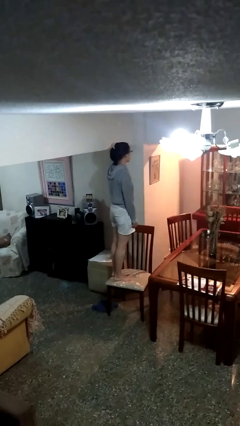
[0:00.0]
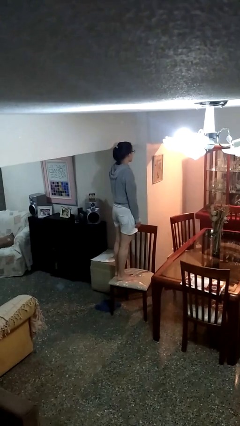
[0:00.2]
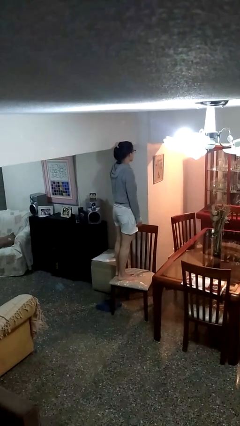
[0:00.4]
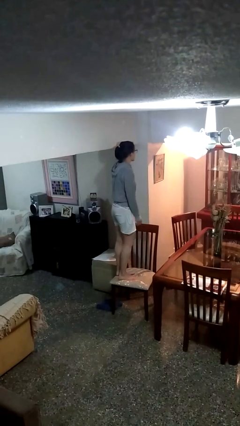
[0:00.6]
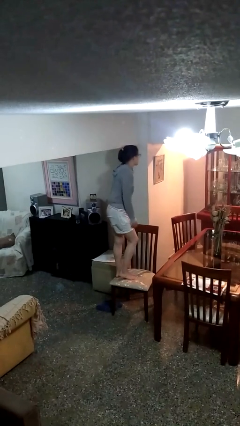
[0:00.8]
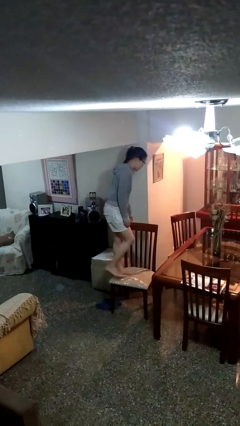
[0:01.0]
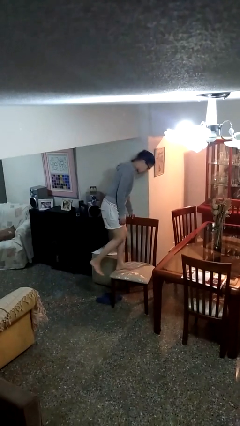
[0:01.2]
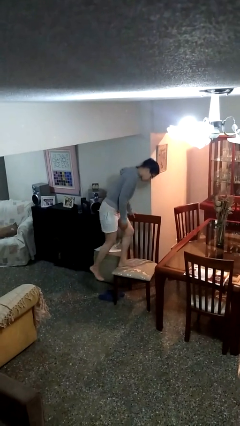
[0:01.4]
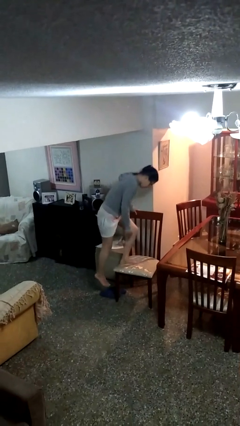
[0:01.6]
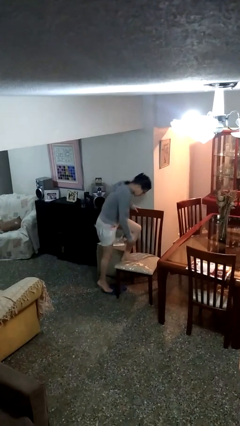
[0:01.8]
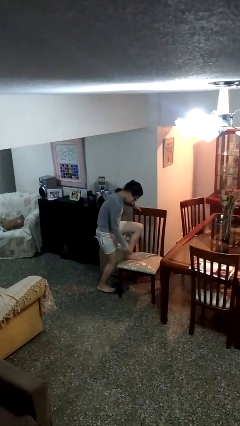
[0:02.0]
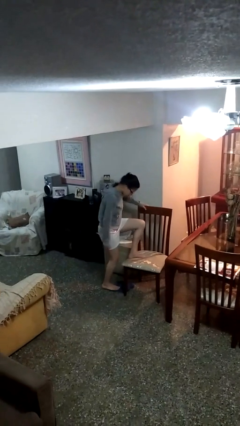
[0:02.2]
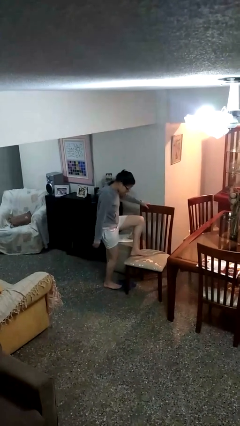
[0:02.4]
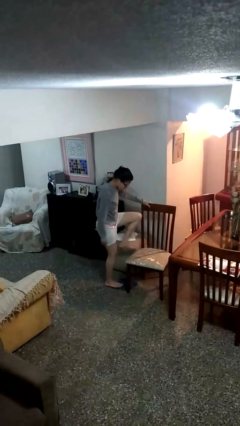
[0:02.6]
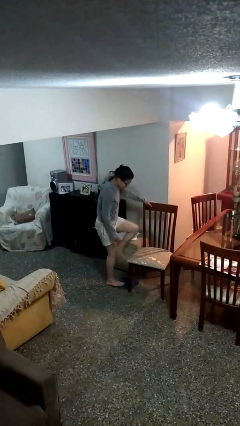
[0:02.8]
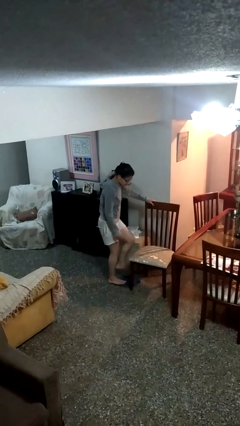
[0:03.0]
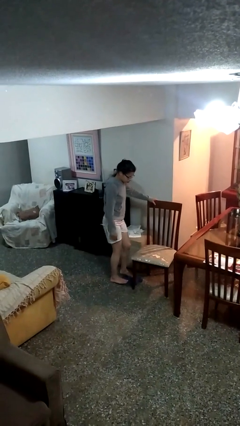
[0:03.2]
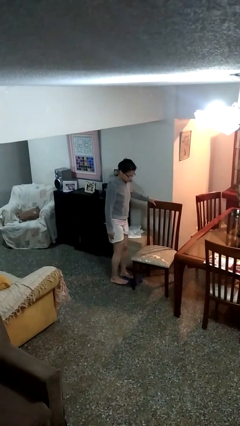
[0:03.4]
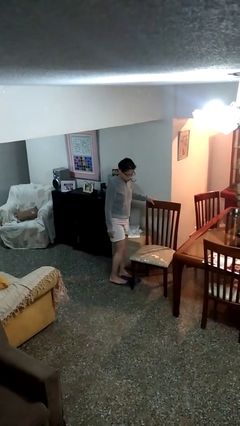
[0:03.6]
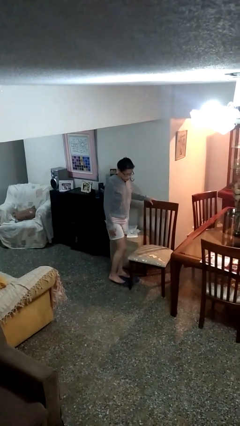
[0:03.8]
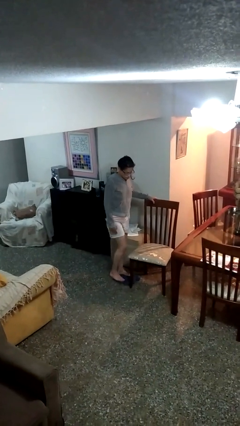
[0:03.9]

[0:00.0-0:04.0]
person climbs off chair

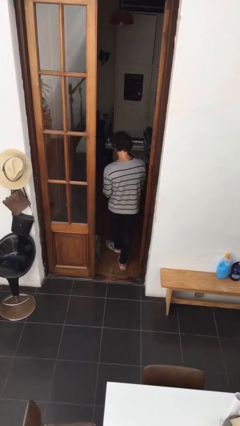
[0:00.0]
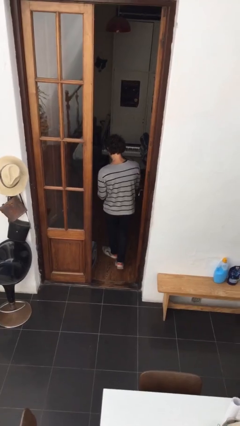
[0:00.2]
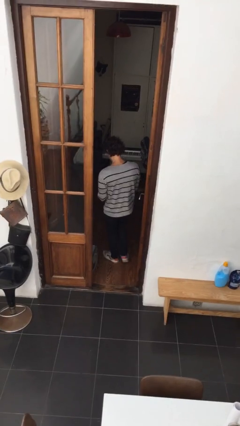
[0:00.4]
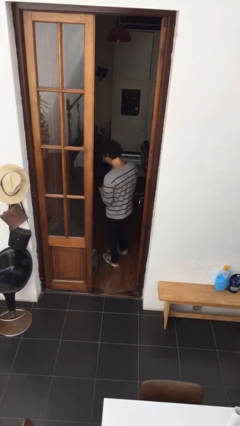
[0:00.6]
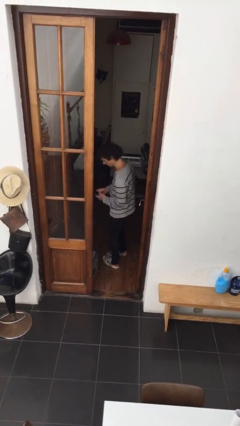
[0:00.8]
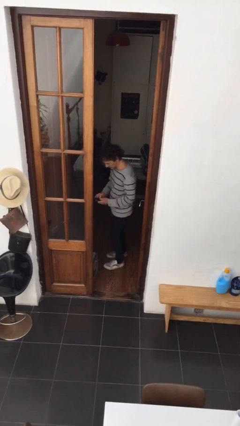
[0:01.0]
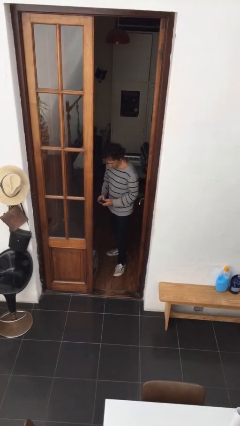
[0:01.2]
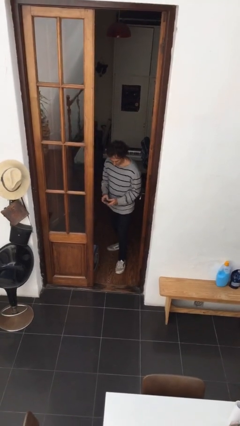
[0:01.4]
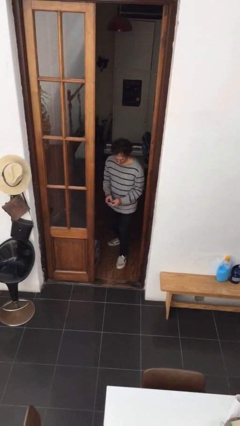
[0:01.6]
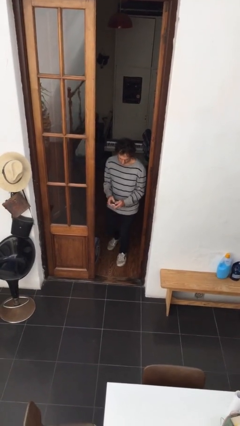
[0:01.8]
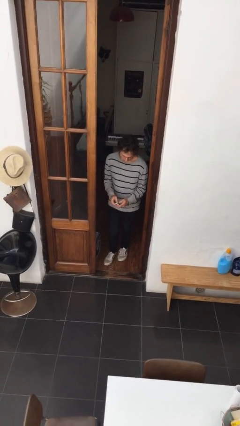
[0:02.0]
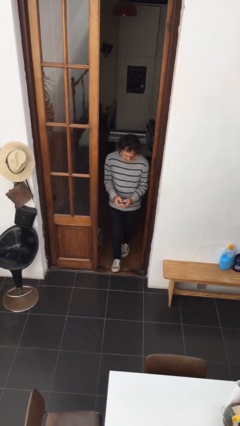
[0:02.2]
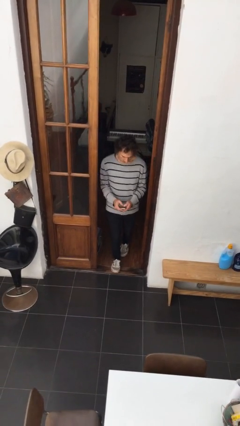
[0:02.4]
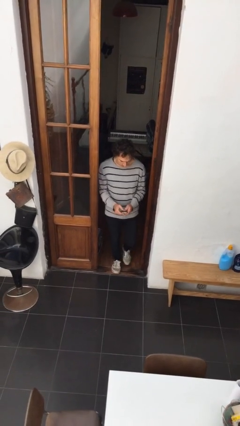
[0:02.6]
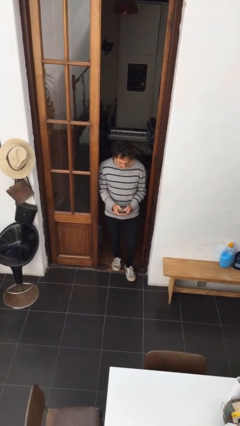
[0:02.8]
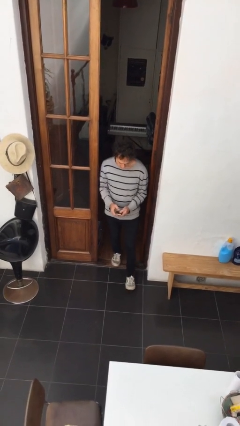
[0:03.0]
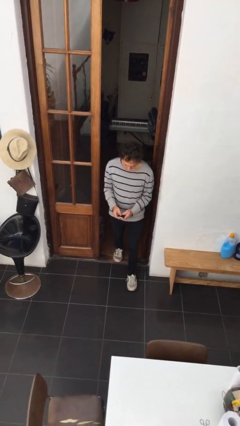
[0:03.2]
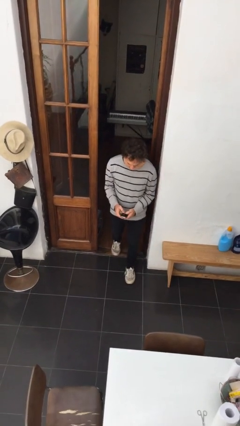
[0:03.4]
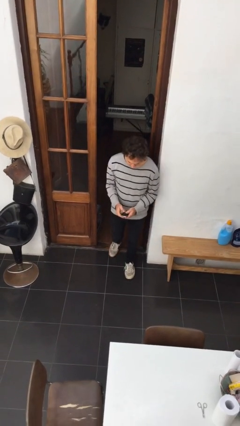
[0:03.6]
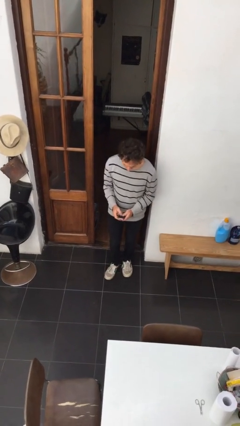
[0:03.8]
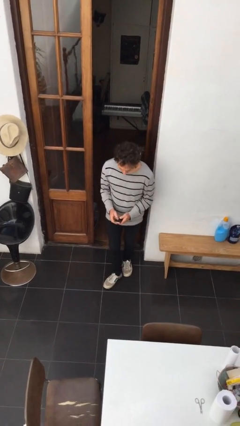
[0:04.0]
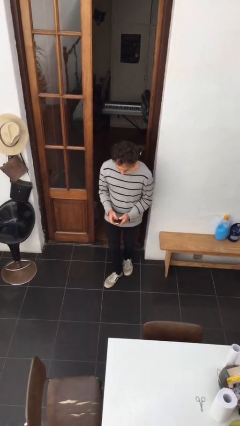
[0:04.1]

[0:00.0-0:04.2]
person enters scene through structure

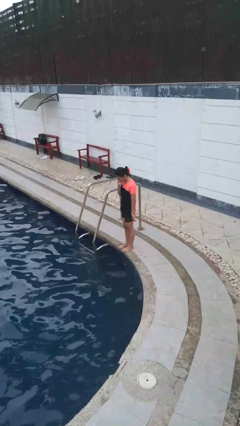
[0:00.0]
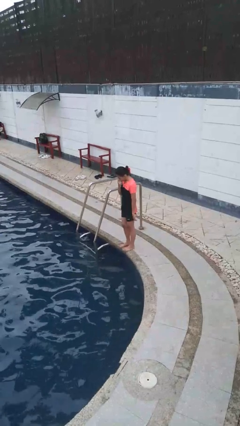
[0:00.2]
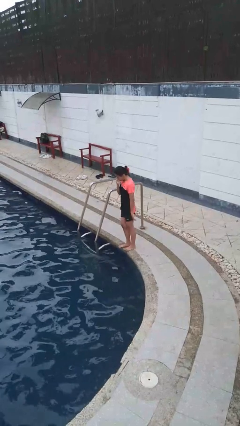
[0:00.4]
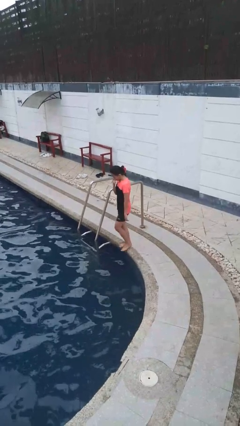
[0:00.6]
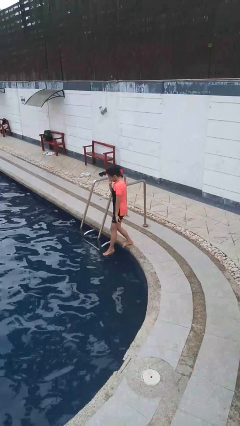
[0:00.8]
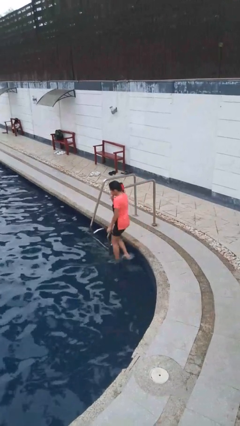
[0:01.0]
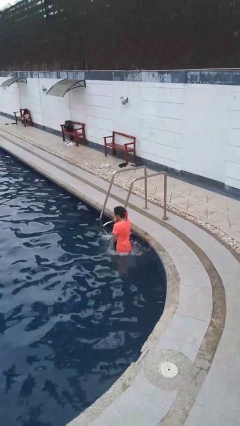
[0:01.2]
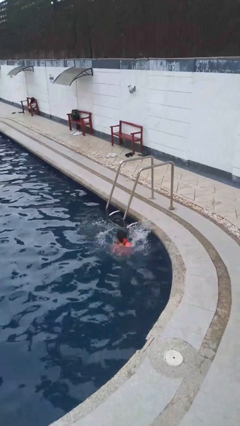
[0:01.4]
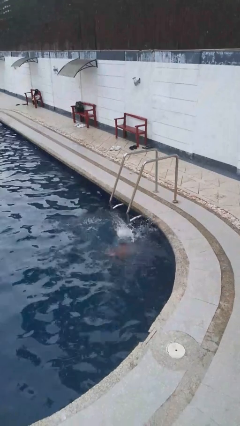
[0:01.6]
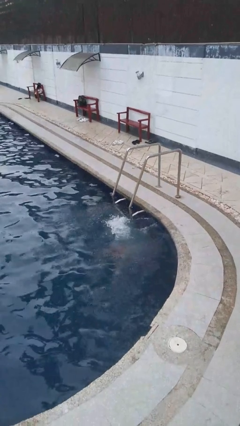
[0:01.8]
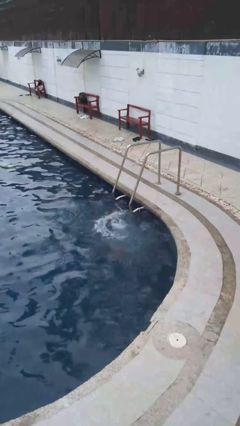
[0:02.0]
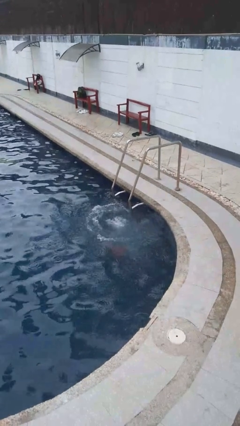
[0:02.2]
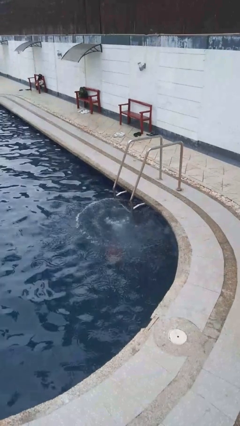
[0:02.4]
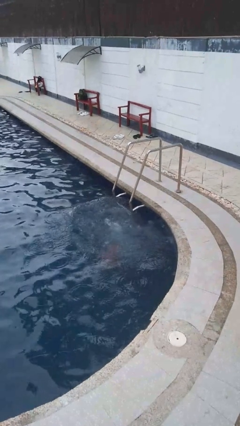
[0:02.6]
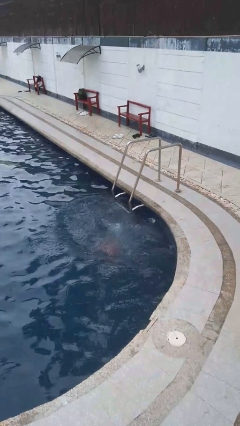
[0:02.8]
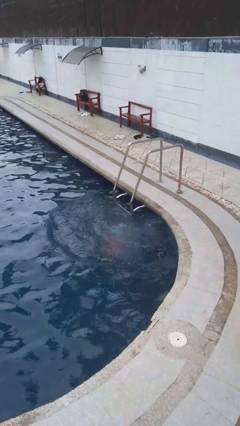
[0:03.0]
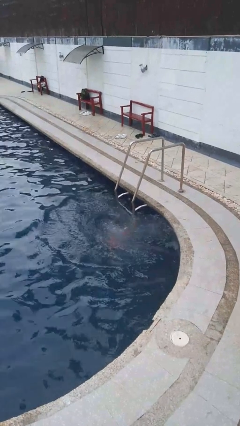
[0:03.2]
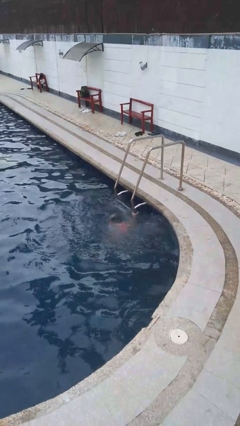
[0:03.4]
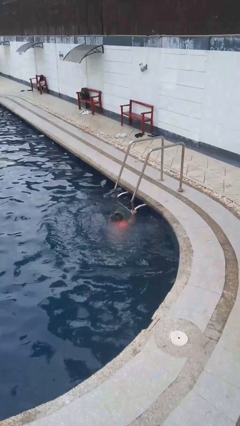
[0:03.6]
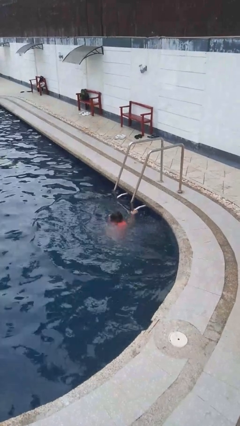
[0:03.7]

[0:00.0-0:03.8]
person jumps into pool

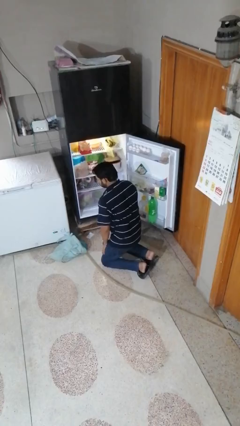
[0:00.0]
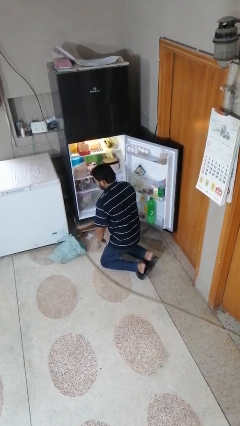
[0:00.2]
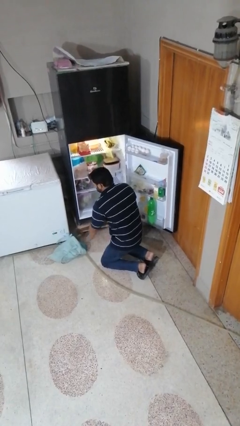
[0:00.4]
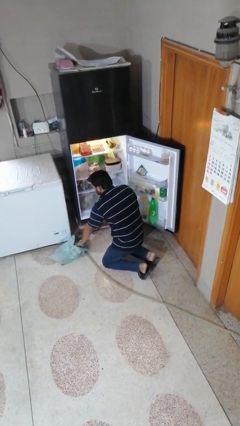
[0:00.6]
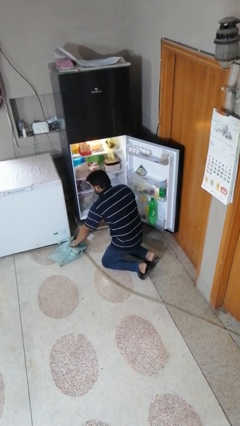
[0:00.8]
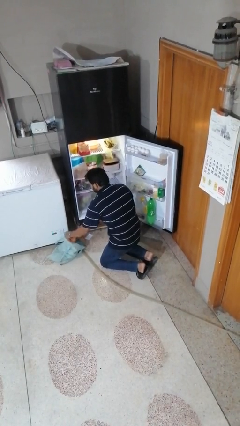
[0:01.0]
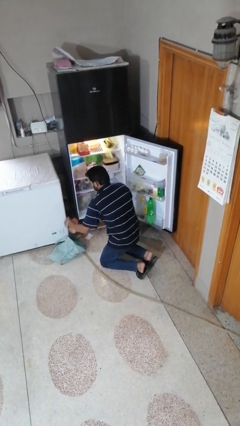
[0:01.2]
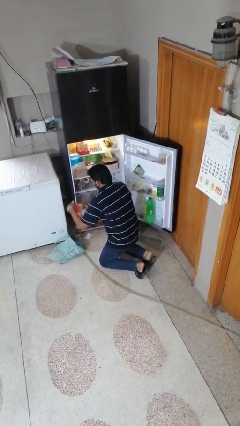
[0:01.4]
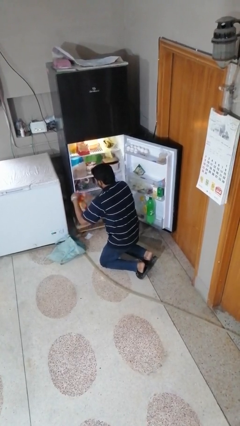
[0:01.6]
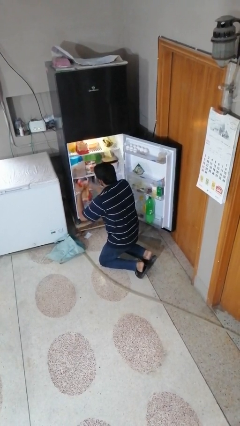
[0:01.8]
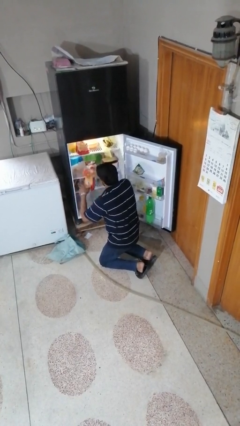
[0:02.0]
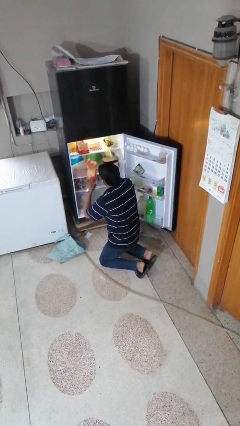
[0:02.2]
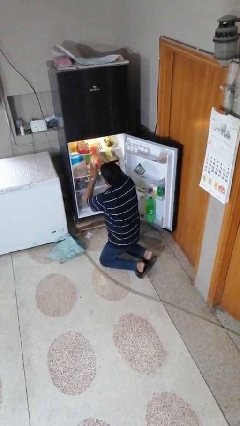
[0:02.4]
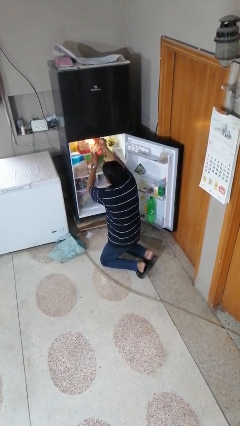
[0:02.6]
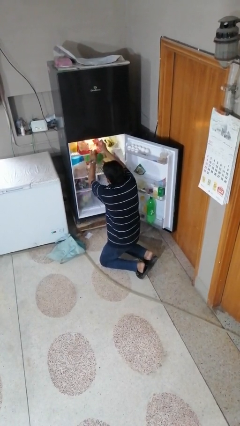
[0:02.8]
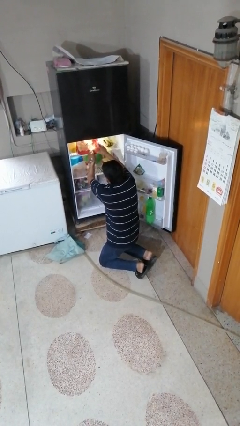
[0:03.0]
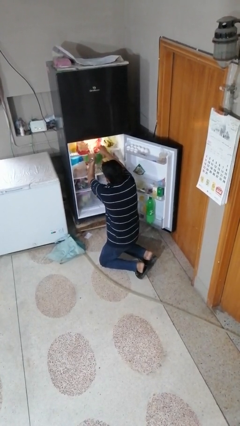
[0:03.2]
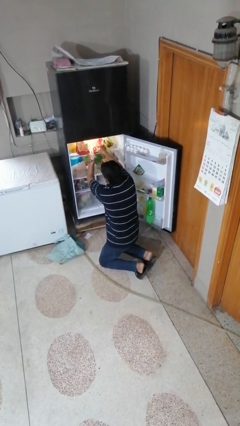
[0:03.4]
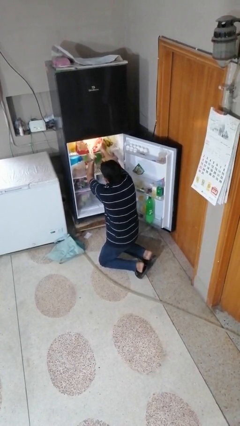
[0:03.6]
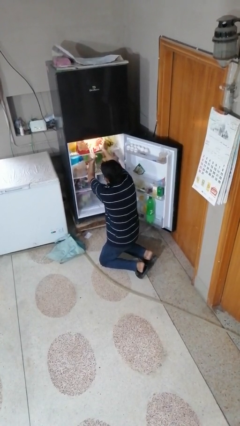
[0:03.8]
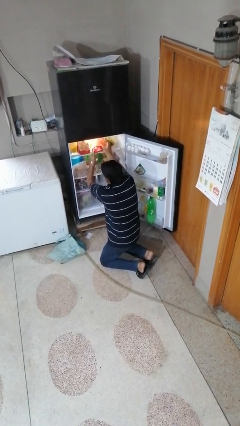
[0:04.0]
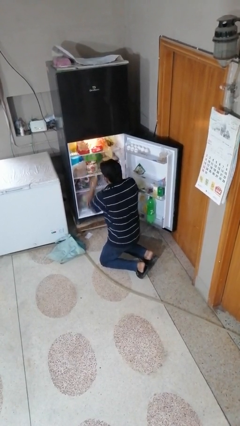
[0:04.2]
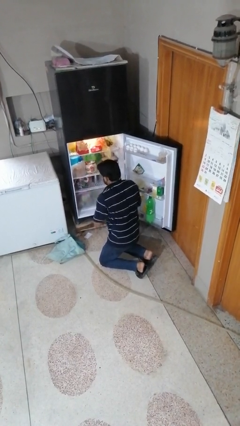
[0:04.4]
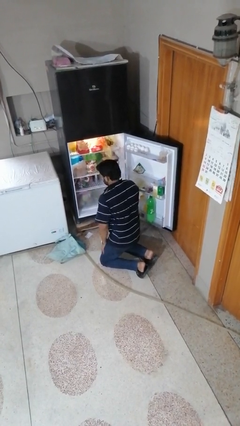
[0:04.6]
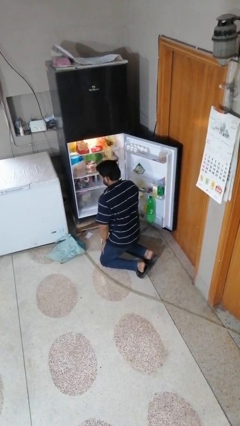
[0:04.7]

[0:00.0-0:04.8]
person loads groceries into refrigerator

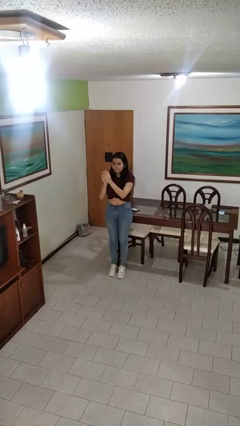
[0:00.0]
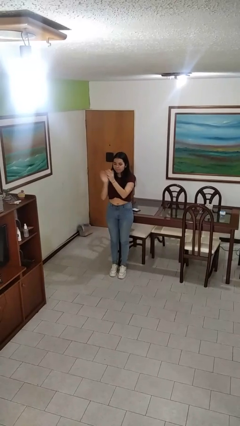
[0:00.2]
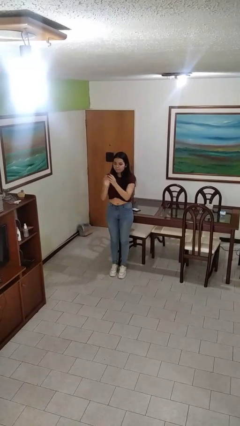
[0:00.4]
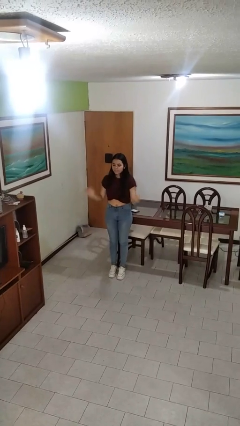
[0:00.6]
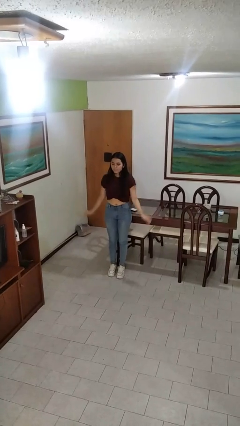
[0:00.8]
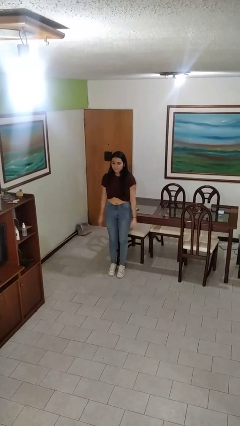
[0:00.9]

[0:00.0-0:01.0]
person claps hands
